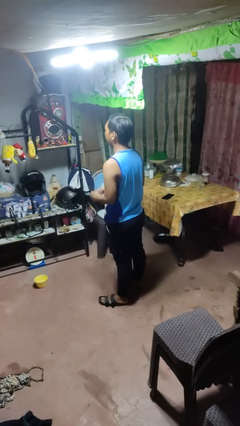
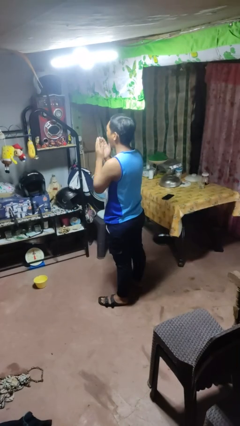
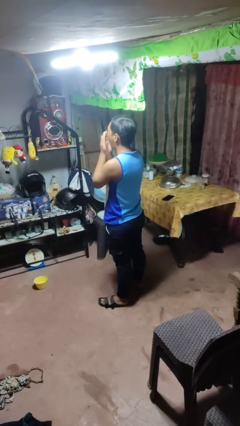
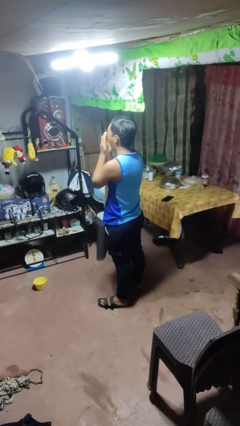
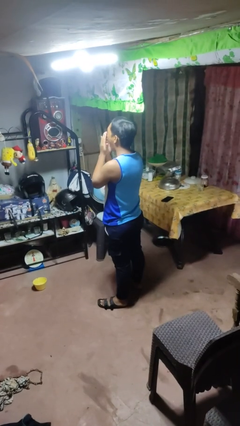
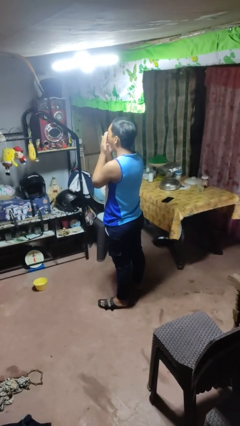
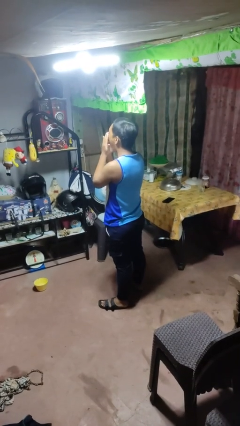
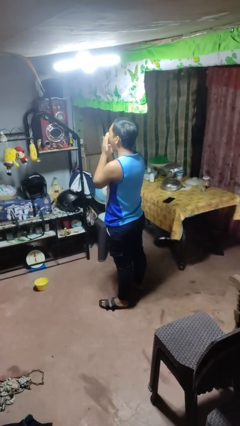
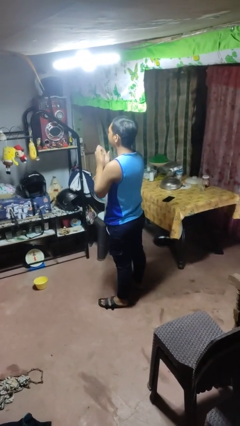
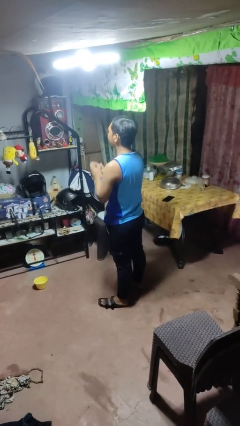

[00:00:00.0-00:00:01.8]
person yawns

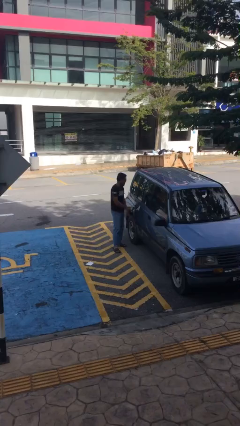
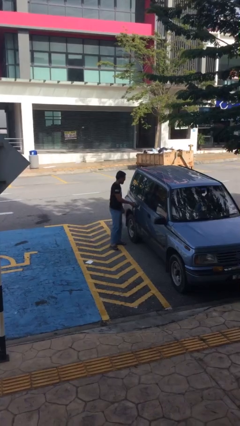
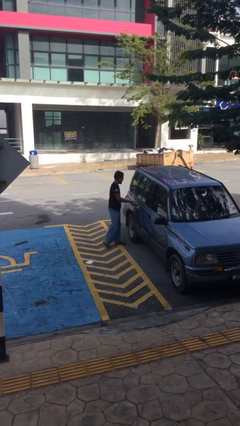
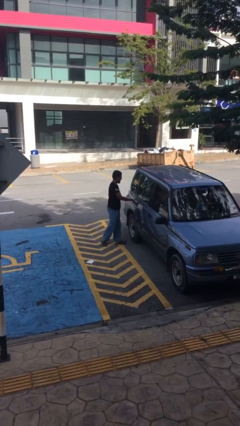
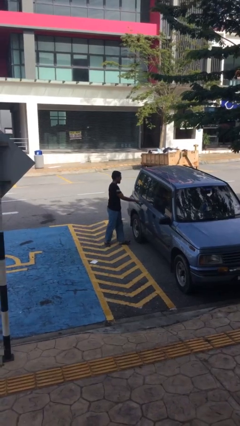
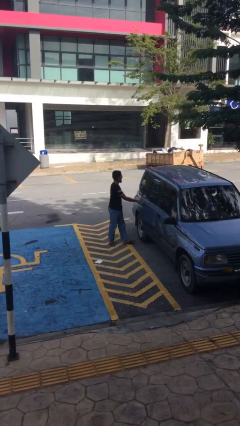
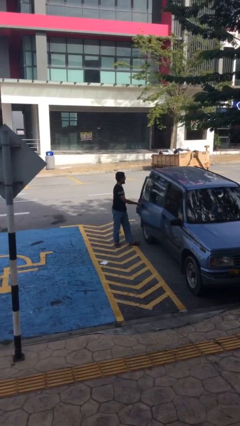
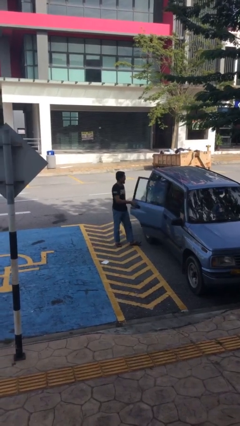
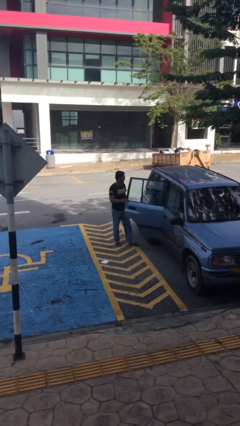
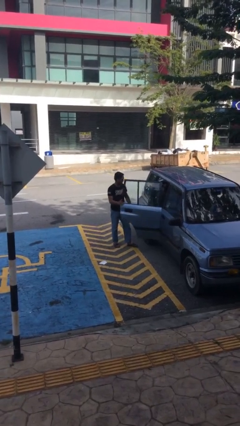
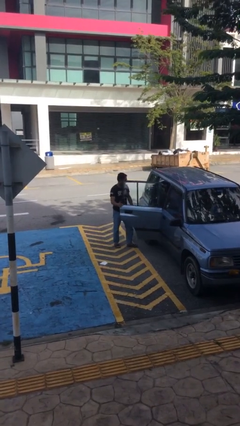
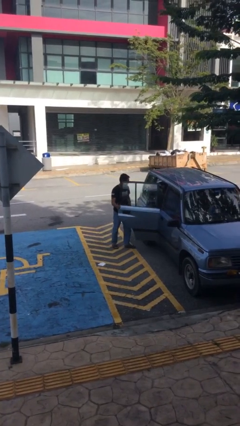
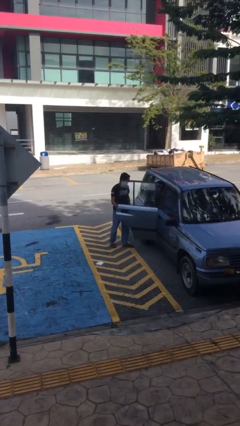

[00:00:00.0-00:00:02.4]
person opens car door

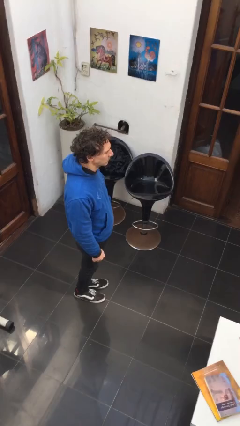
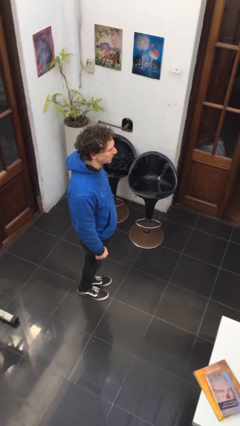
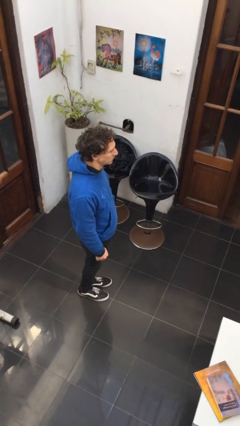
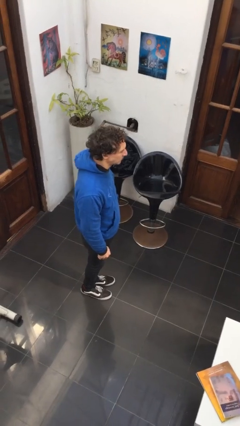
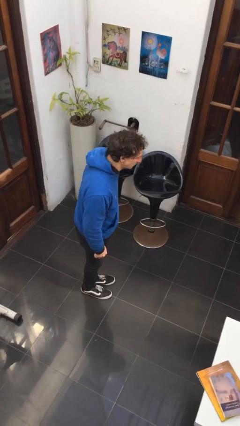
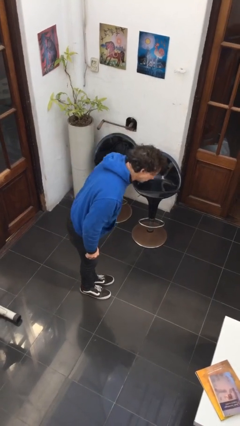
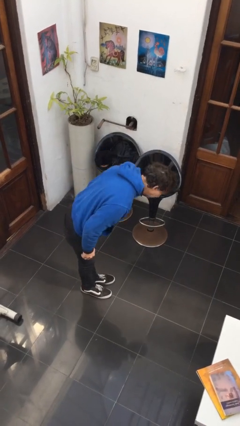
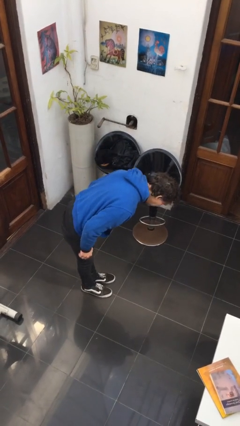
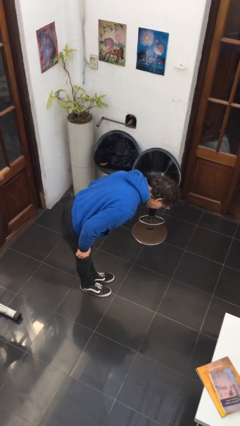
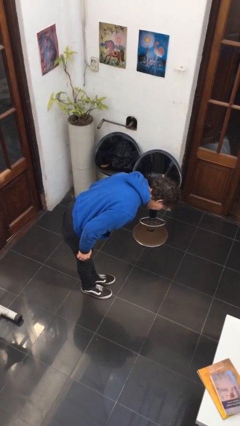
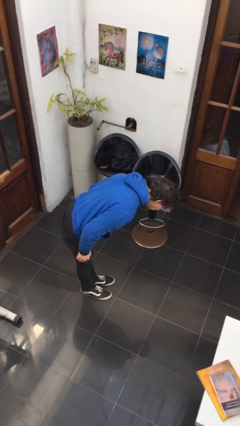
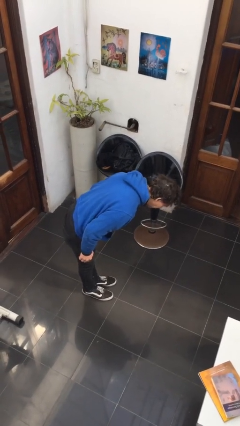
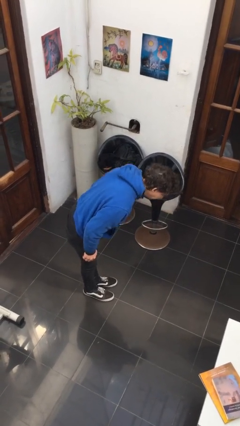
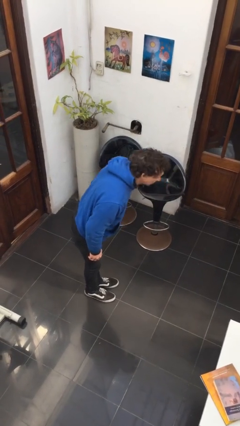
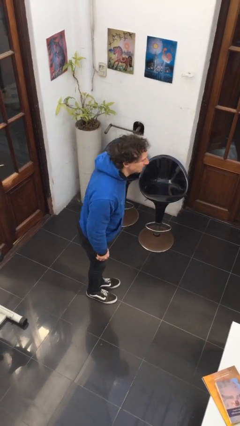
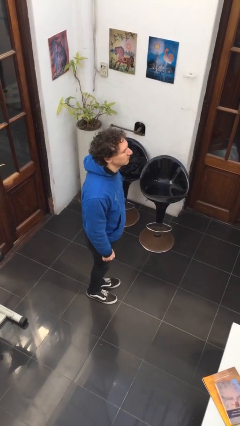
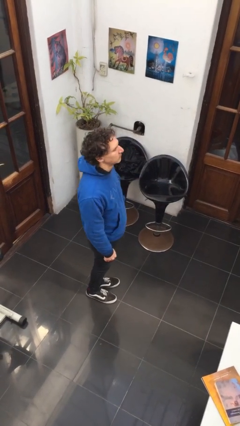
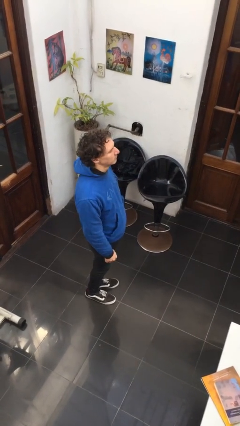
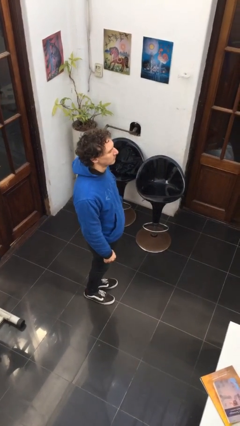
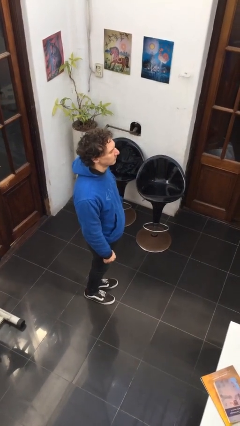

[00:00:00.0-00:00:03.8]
person bows

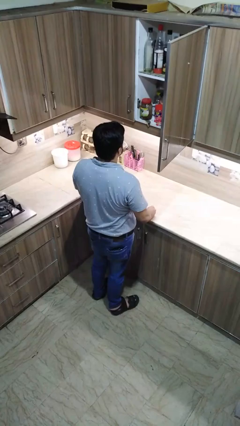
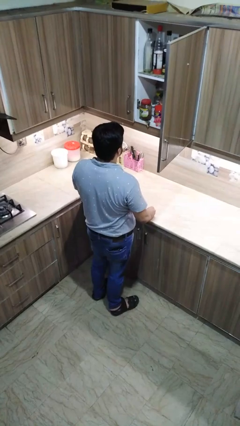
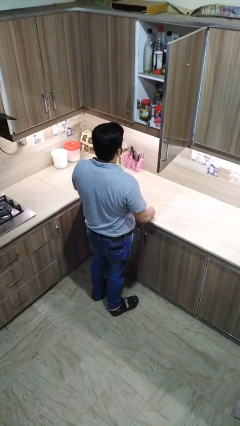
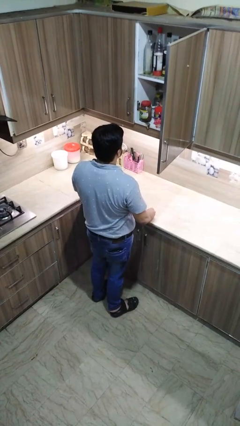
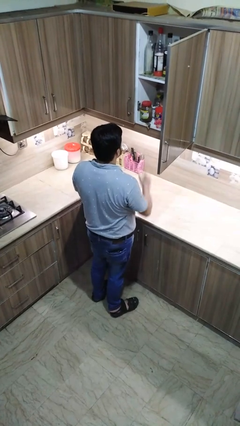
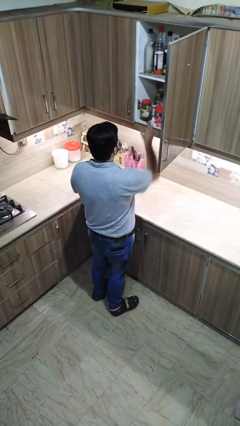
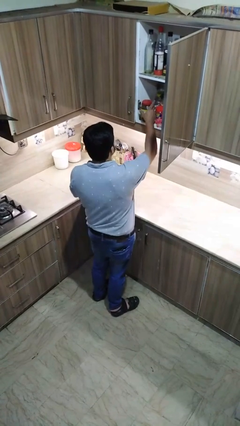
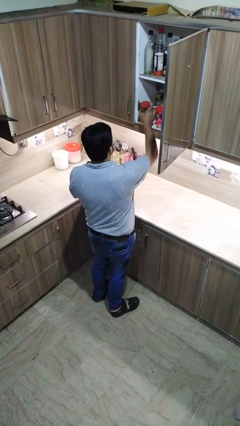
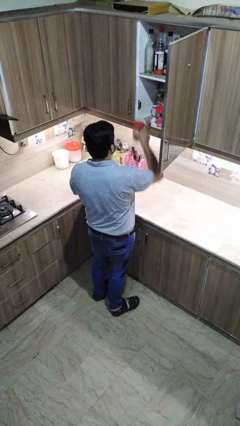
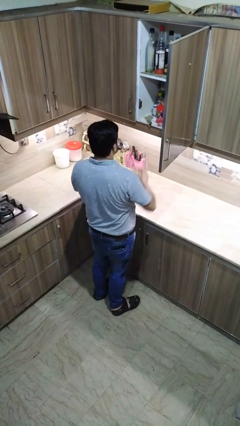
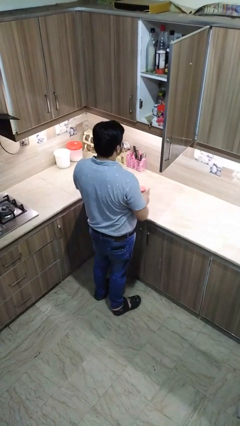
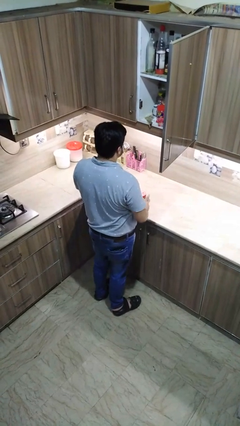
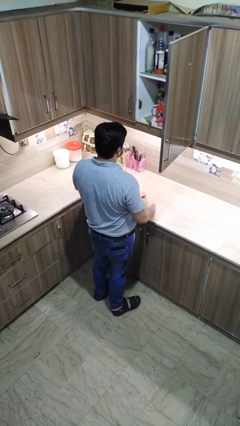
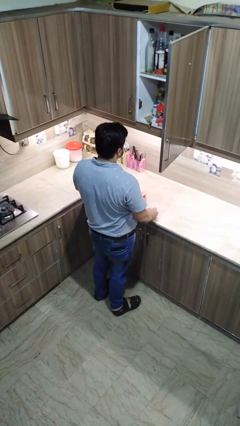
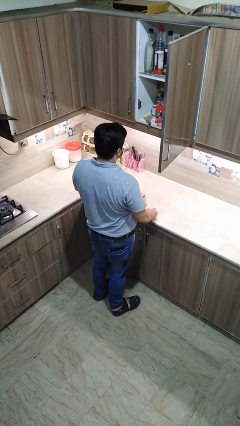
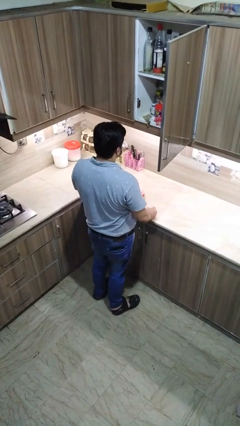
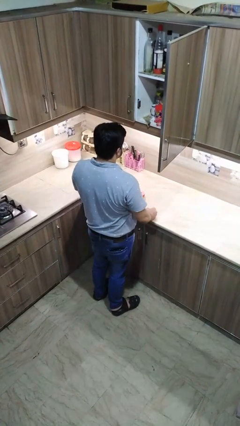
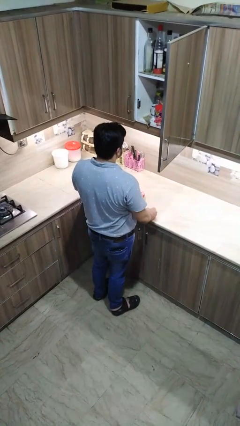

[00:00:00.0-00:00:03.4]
person puts object in cabinet

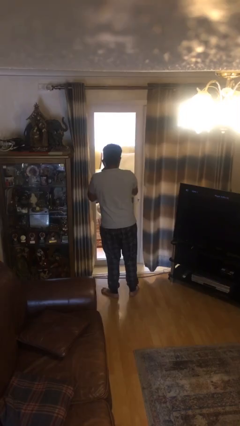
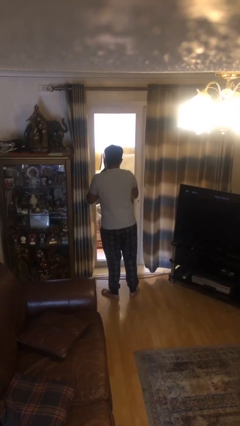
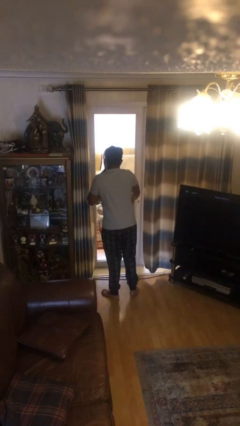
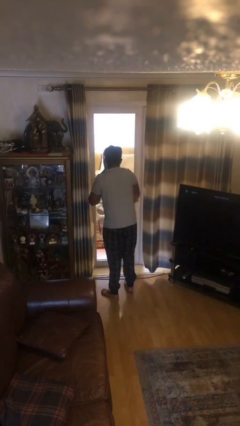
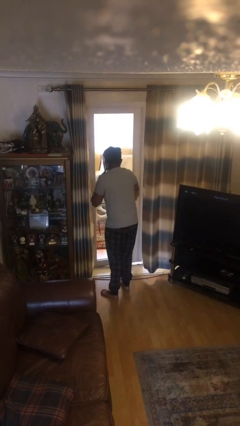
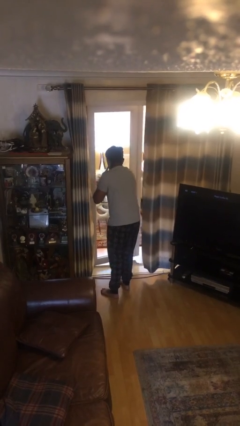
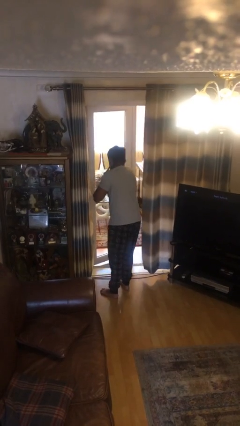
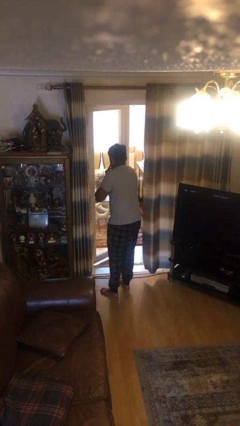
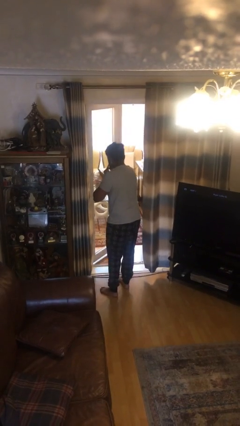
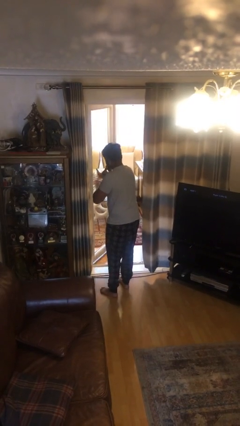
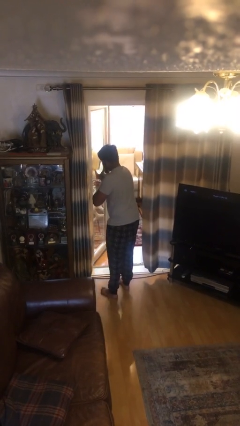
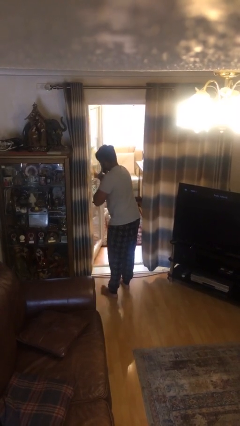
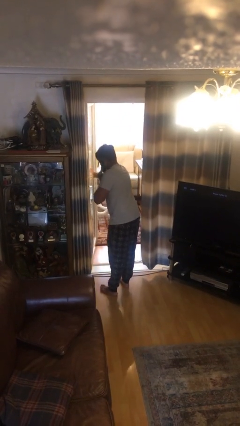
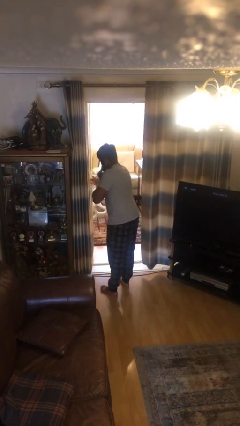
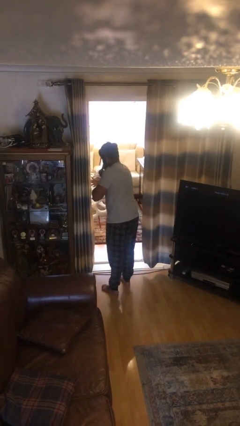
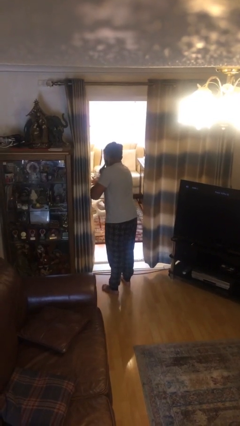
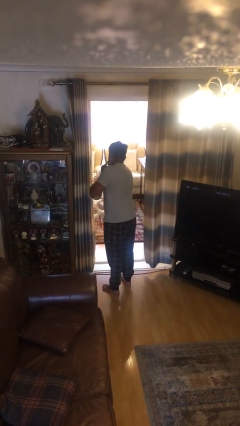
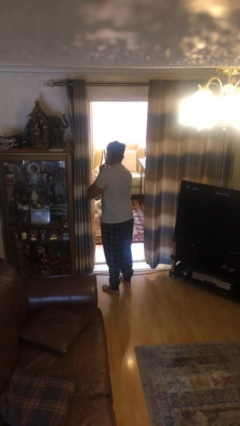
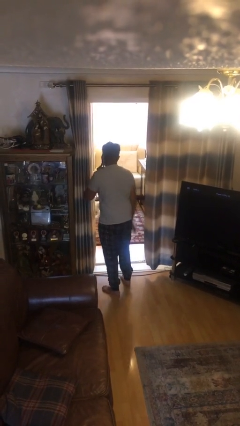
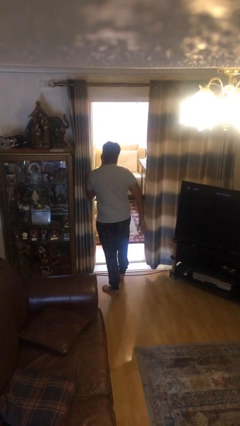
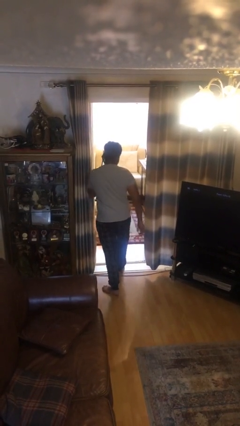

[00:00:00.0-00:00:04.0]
person opens facility door

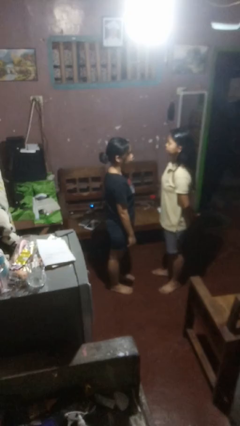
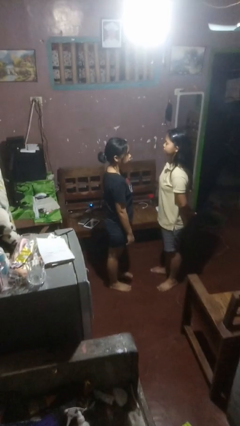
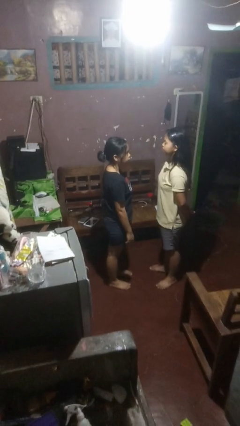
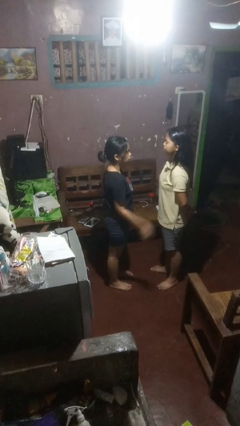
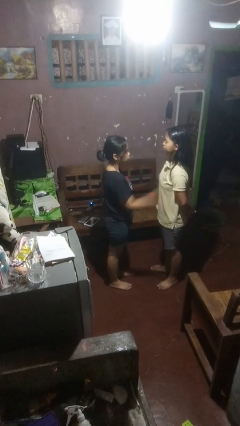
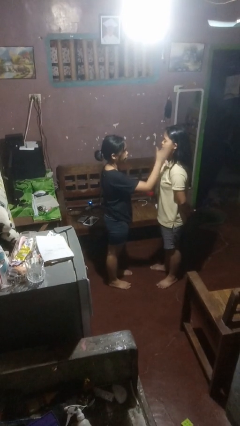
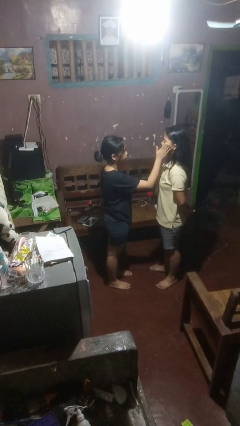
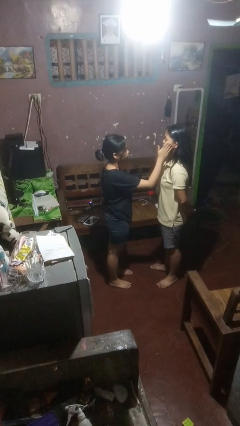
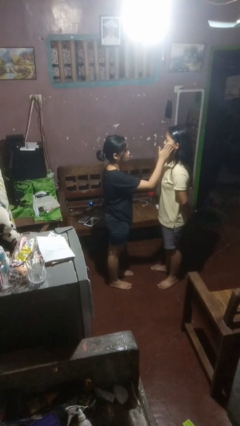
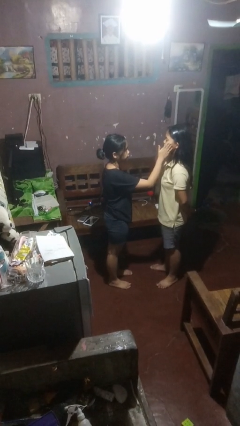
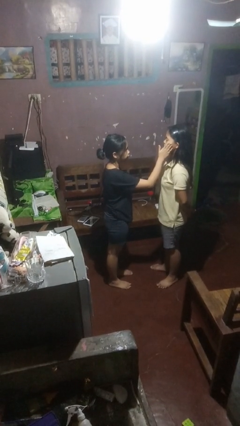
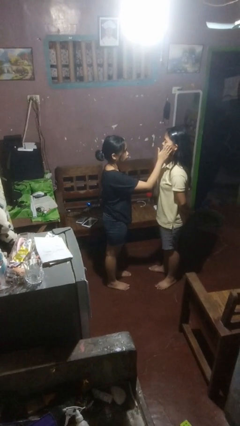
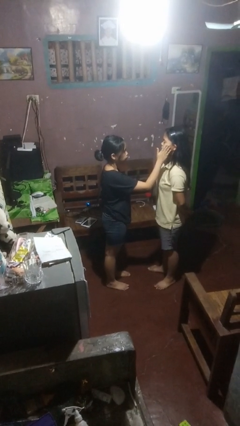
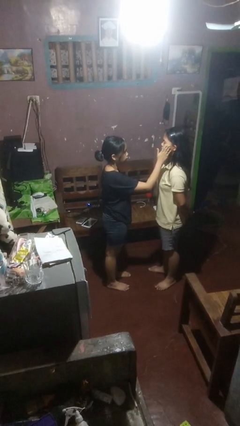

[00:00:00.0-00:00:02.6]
person touches face of person
